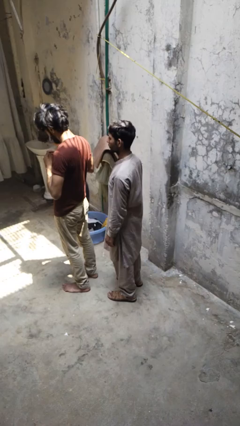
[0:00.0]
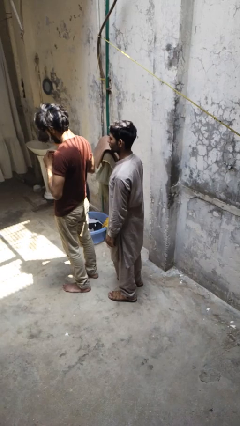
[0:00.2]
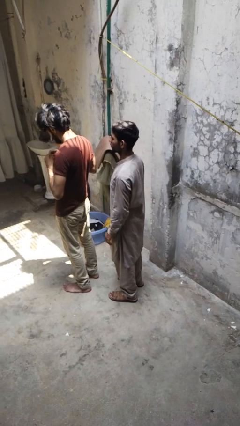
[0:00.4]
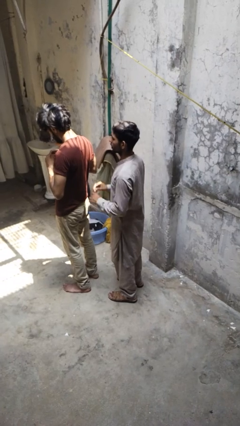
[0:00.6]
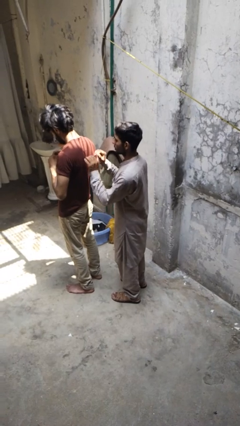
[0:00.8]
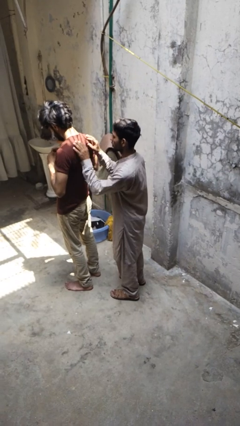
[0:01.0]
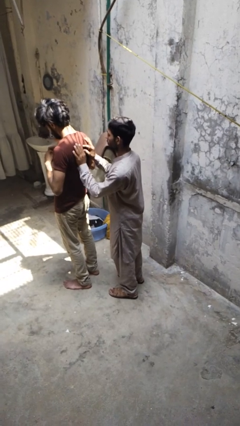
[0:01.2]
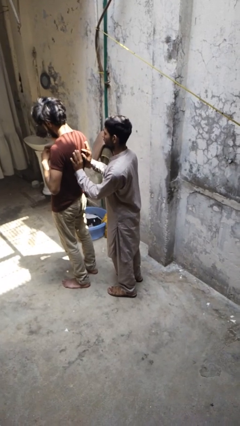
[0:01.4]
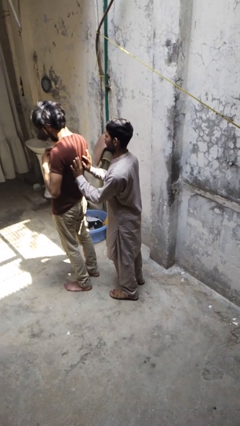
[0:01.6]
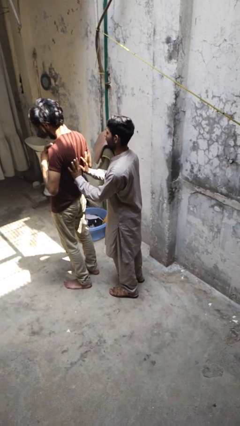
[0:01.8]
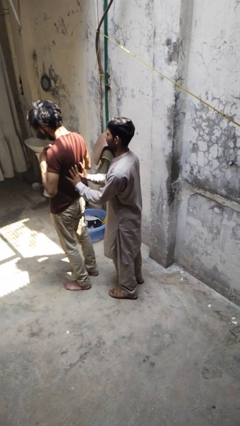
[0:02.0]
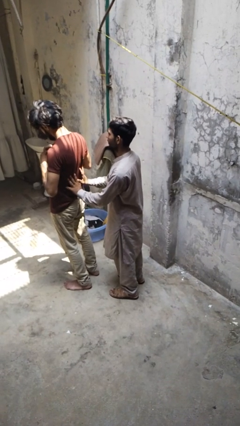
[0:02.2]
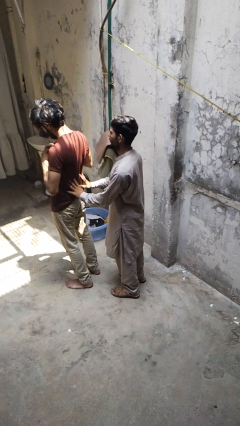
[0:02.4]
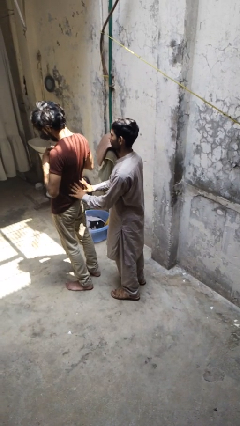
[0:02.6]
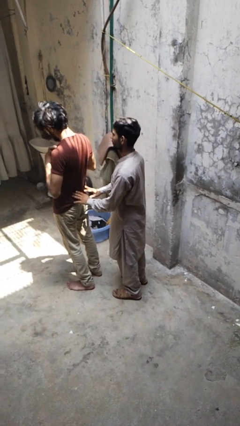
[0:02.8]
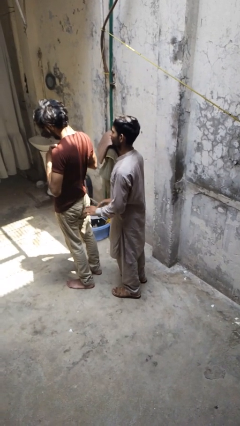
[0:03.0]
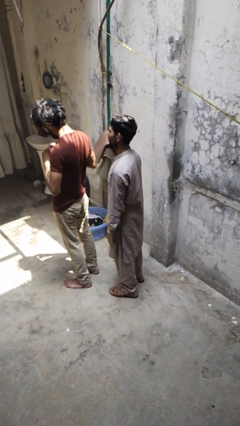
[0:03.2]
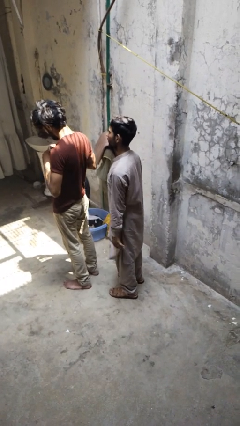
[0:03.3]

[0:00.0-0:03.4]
person touches back of person

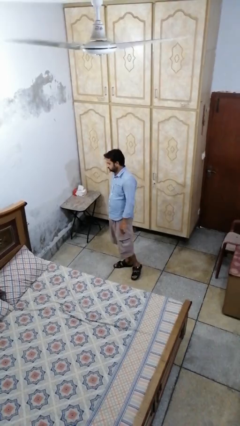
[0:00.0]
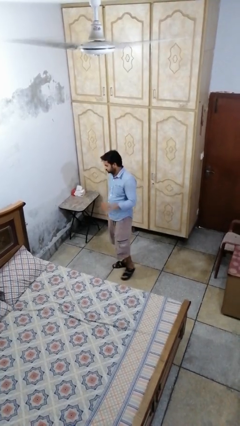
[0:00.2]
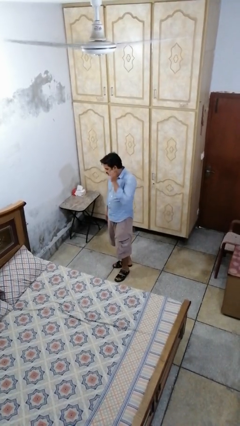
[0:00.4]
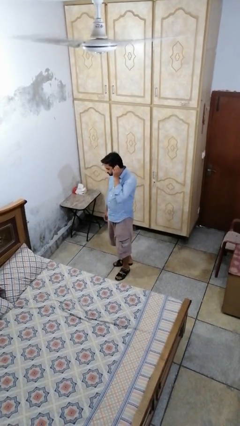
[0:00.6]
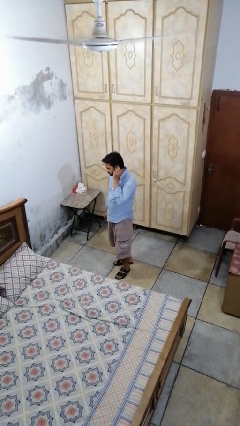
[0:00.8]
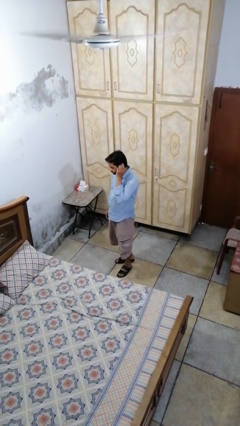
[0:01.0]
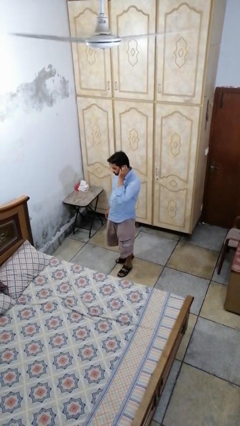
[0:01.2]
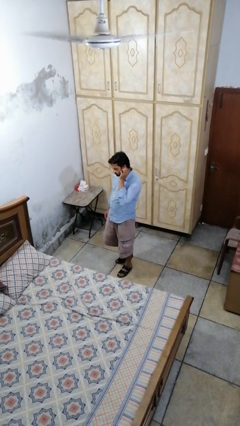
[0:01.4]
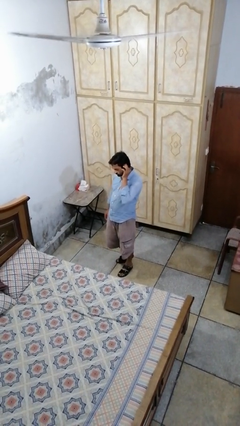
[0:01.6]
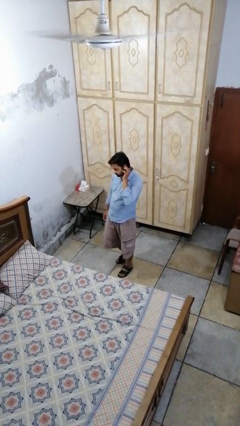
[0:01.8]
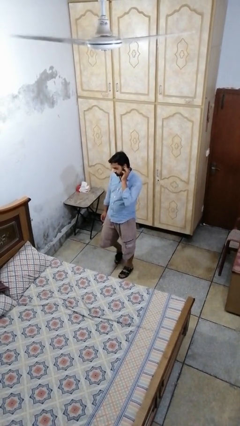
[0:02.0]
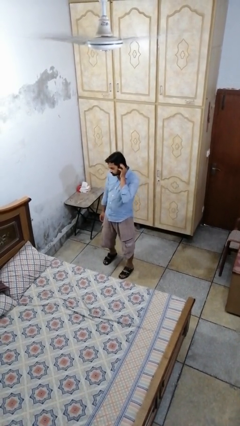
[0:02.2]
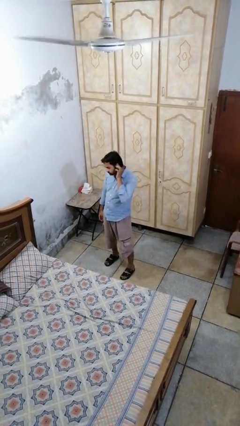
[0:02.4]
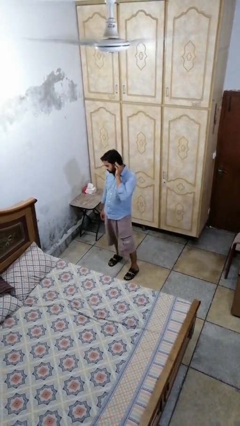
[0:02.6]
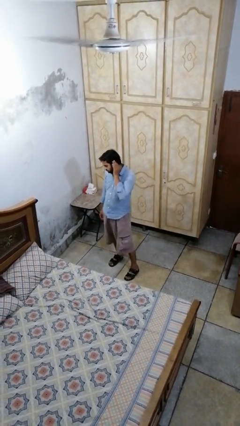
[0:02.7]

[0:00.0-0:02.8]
person touches earlobe

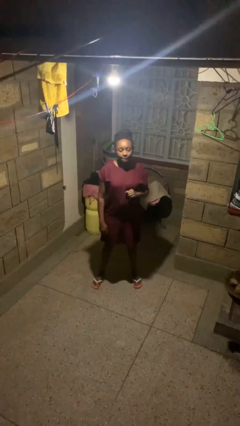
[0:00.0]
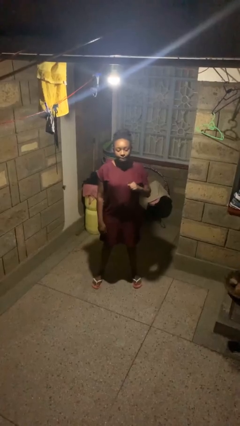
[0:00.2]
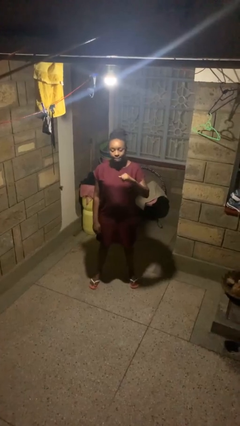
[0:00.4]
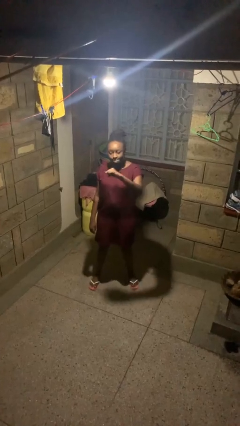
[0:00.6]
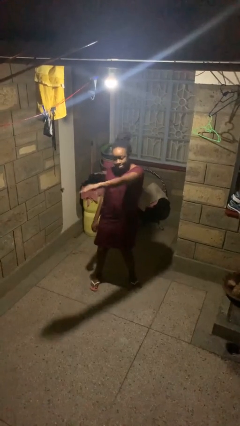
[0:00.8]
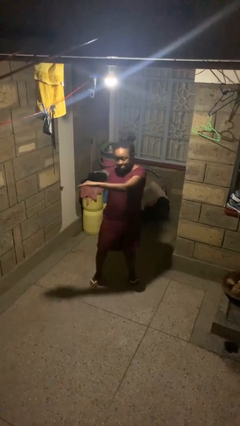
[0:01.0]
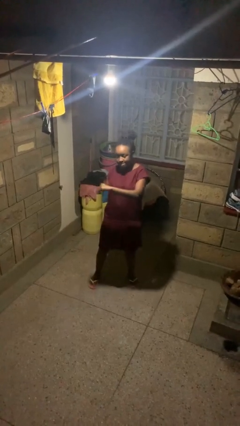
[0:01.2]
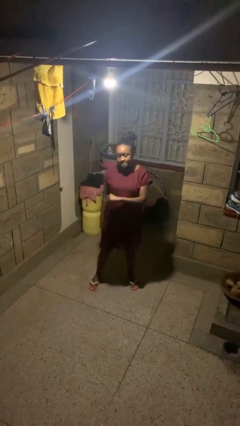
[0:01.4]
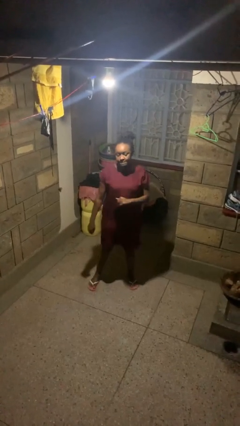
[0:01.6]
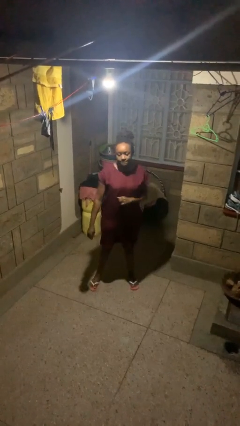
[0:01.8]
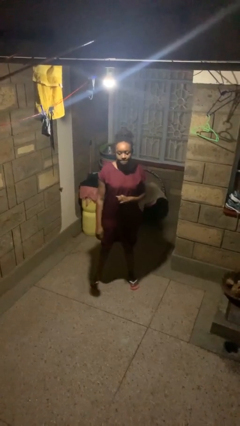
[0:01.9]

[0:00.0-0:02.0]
person karate chop

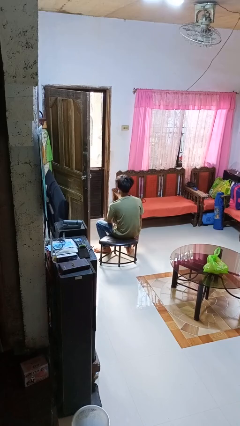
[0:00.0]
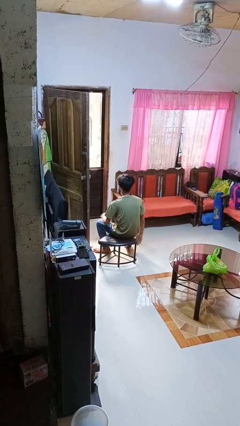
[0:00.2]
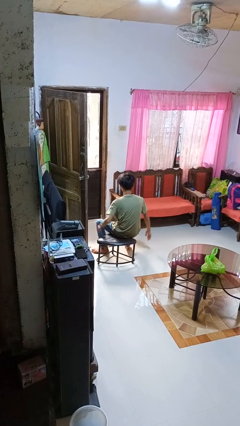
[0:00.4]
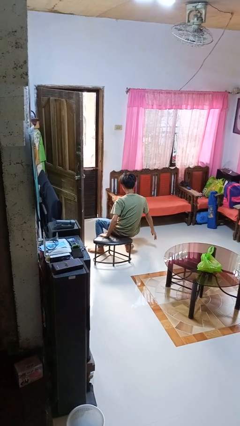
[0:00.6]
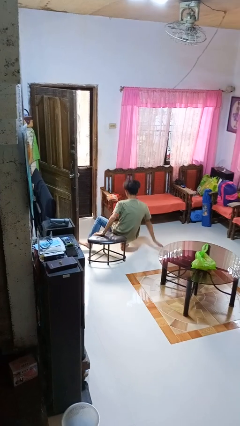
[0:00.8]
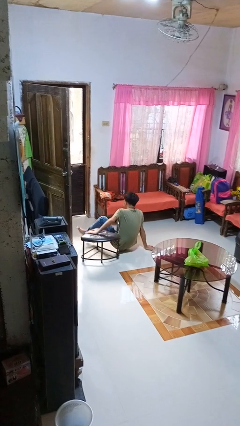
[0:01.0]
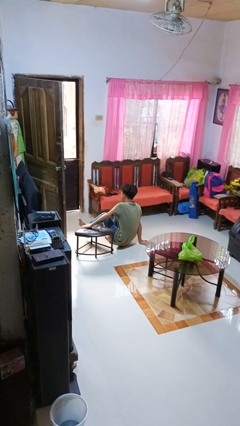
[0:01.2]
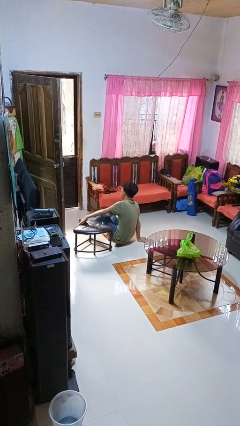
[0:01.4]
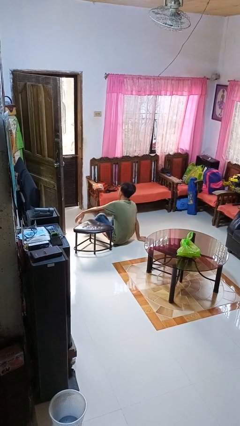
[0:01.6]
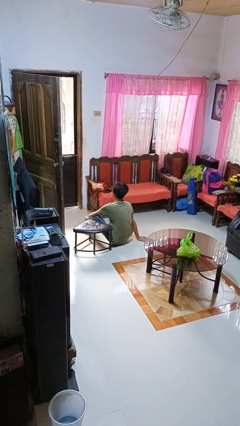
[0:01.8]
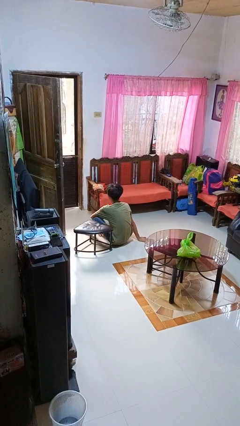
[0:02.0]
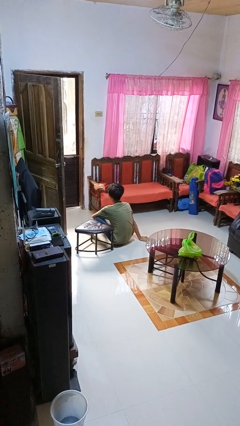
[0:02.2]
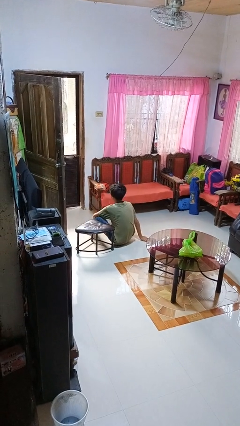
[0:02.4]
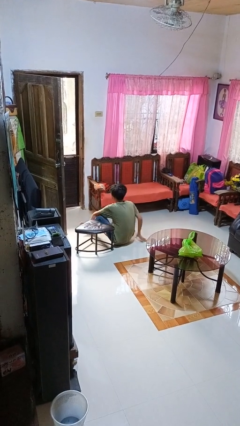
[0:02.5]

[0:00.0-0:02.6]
person falls from chair

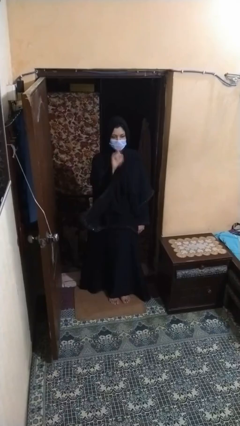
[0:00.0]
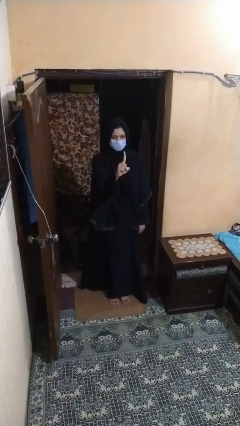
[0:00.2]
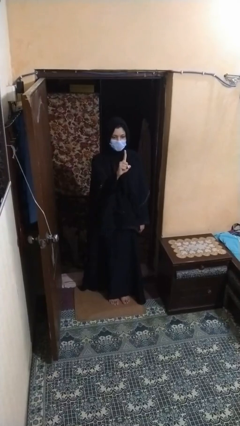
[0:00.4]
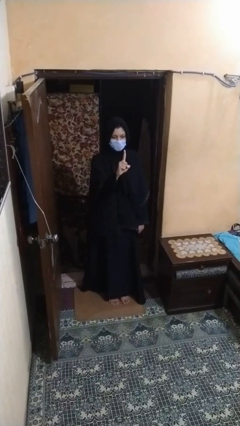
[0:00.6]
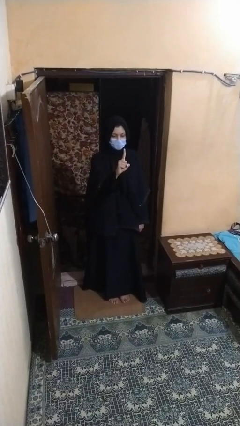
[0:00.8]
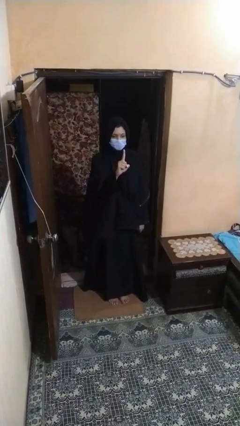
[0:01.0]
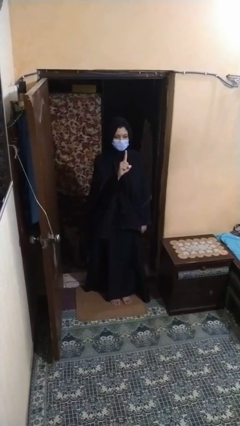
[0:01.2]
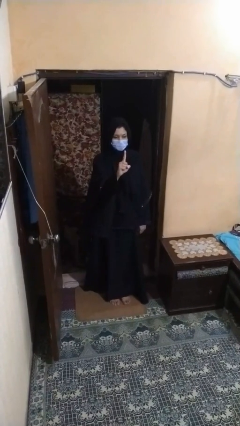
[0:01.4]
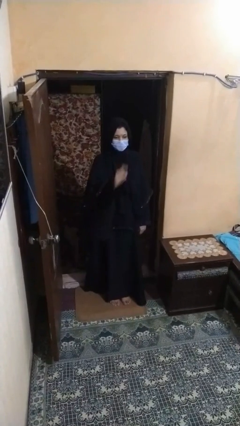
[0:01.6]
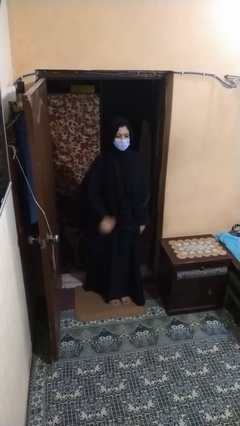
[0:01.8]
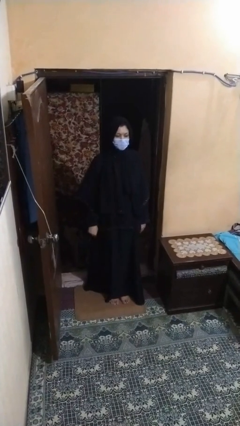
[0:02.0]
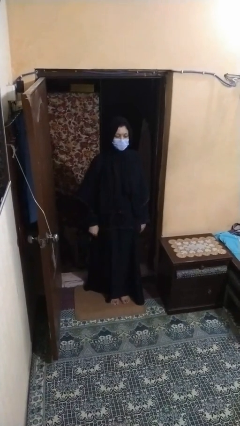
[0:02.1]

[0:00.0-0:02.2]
person gestures number one

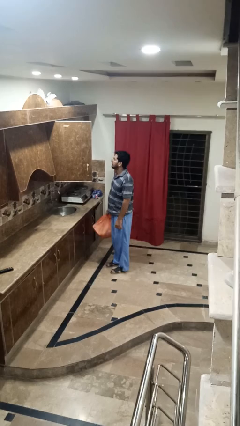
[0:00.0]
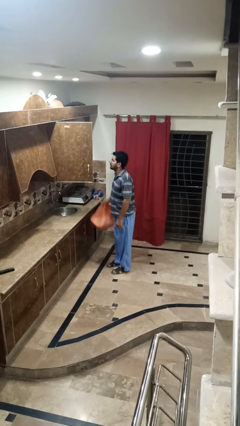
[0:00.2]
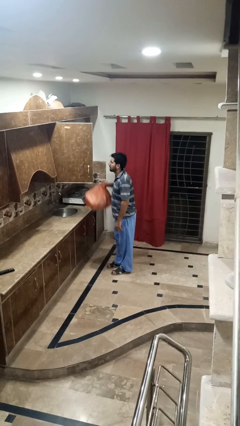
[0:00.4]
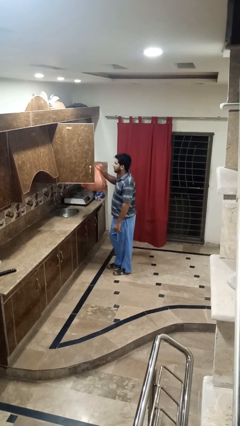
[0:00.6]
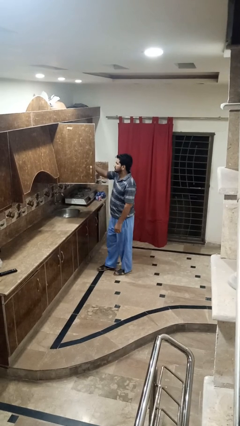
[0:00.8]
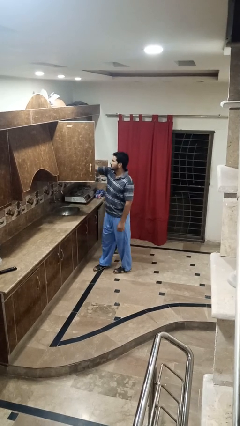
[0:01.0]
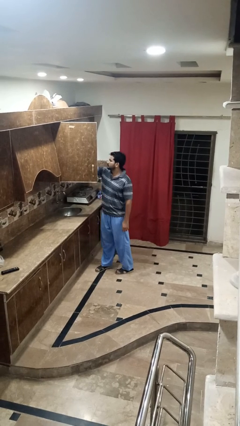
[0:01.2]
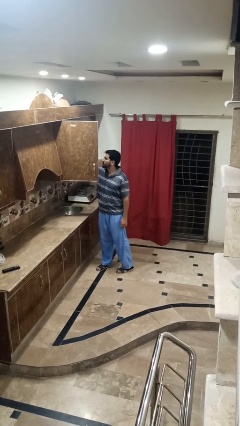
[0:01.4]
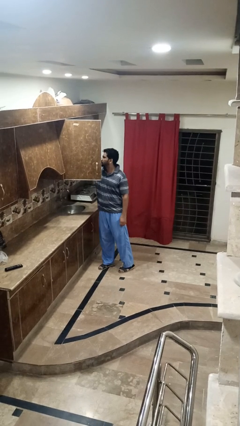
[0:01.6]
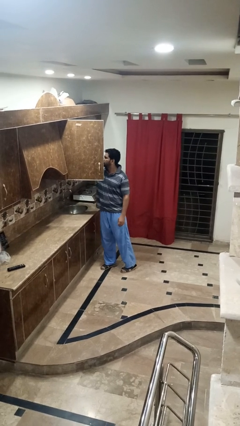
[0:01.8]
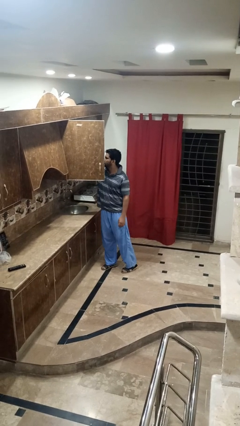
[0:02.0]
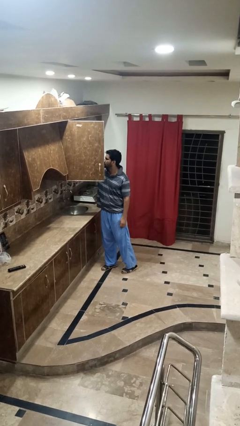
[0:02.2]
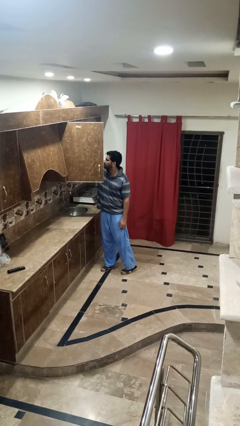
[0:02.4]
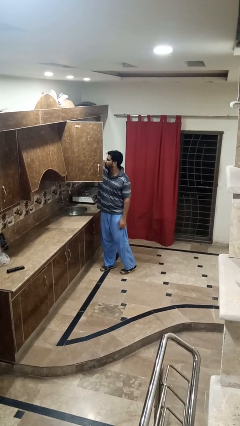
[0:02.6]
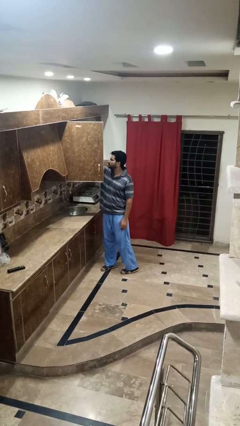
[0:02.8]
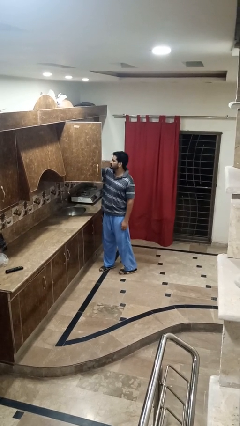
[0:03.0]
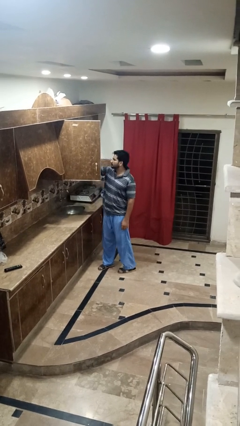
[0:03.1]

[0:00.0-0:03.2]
person loads groceries into cabinet

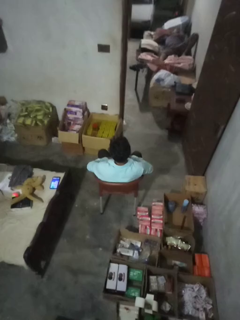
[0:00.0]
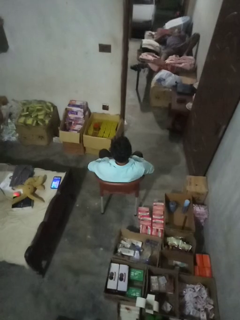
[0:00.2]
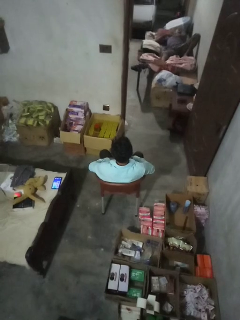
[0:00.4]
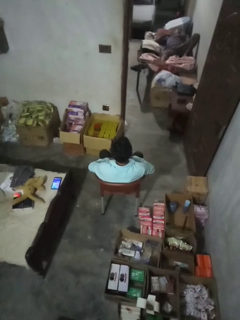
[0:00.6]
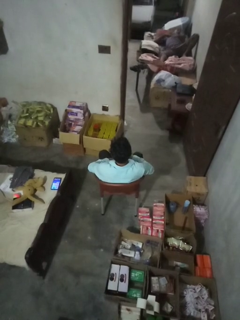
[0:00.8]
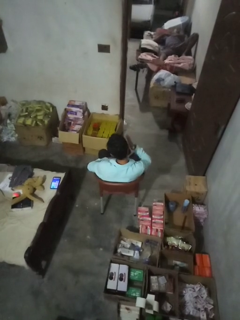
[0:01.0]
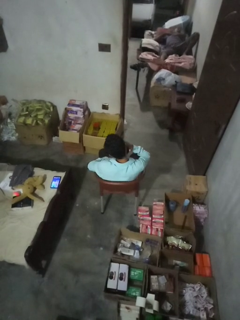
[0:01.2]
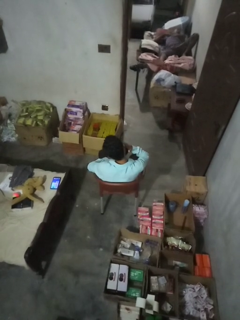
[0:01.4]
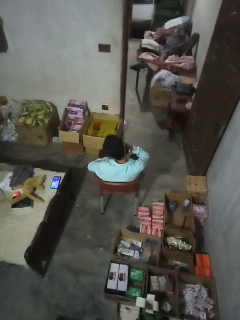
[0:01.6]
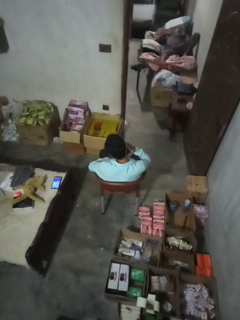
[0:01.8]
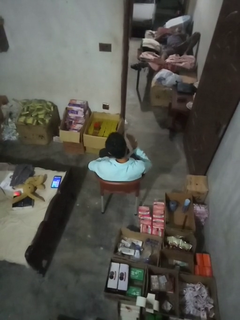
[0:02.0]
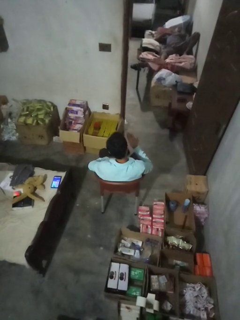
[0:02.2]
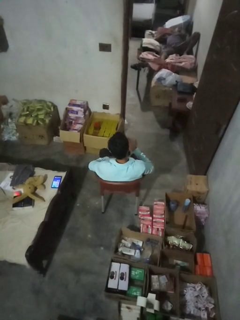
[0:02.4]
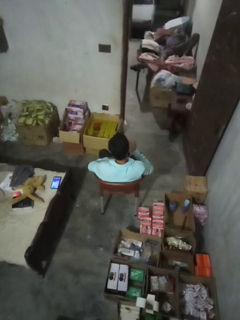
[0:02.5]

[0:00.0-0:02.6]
person swats bug
